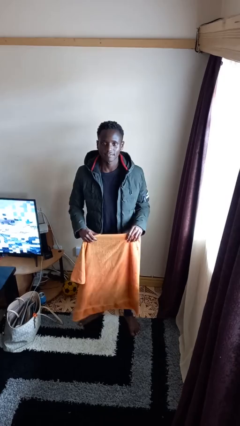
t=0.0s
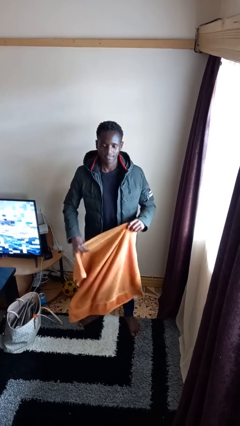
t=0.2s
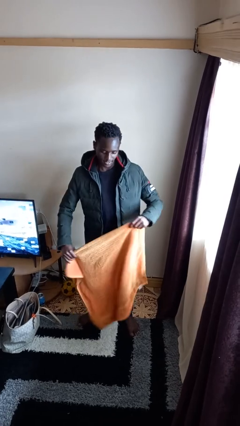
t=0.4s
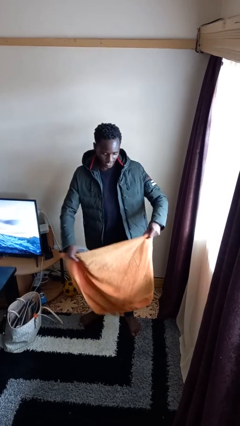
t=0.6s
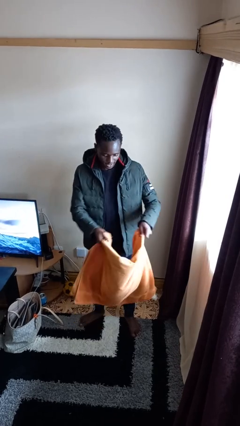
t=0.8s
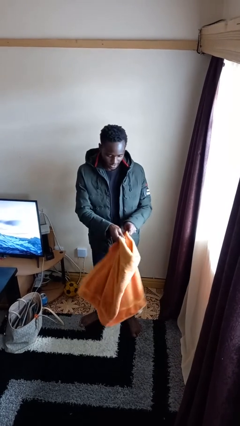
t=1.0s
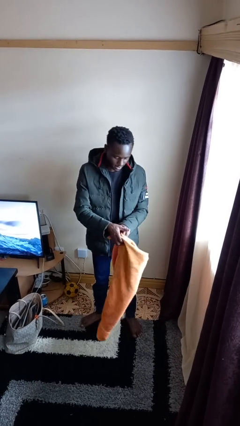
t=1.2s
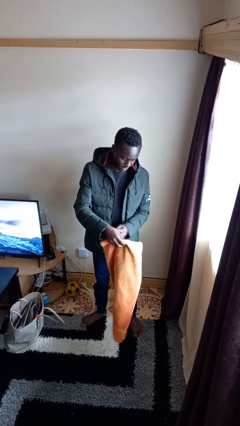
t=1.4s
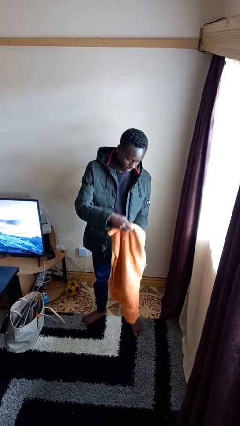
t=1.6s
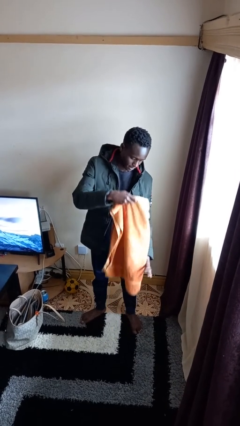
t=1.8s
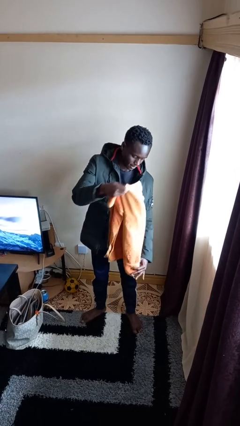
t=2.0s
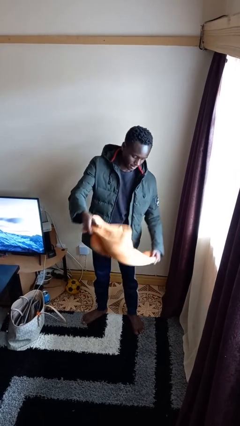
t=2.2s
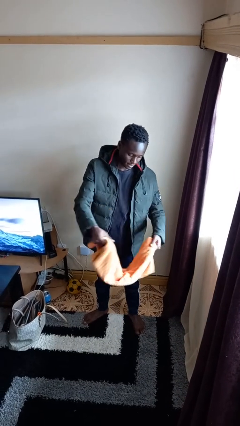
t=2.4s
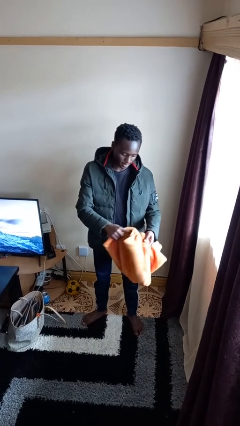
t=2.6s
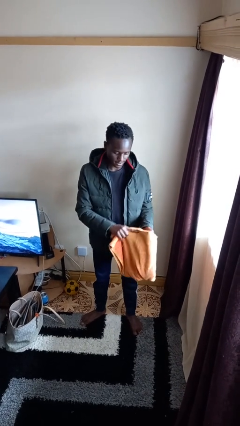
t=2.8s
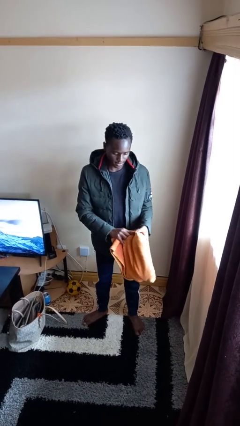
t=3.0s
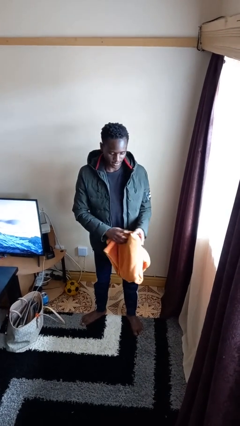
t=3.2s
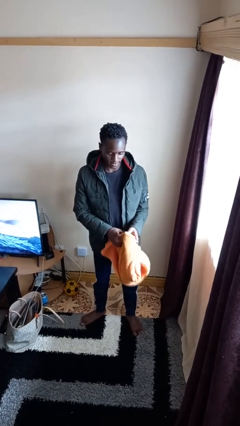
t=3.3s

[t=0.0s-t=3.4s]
person folds towel

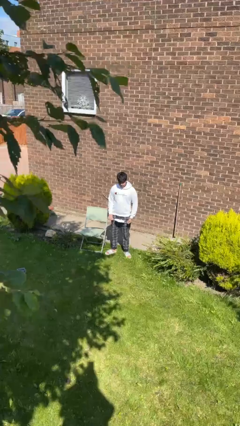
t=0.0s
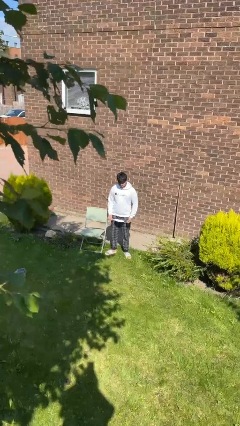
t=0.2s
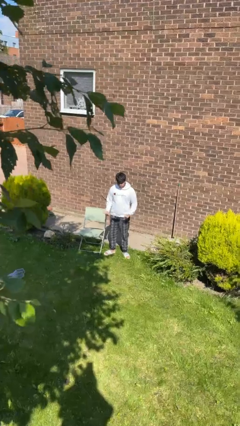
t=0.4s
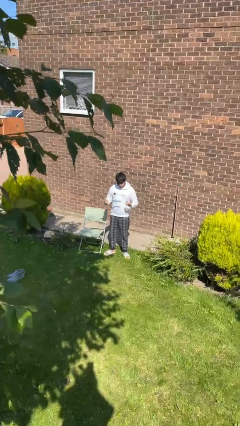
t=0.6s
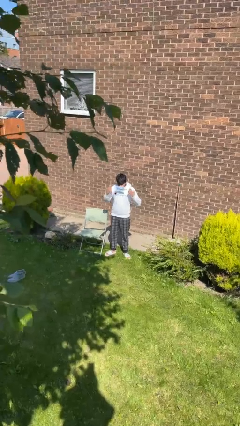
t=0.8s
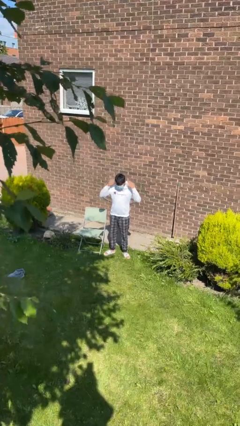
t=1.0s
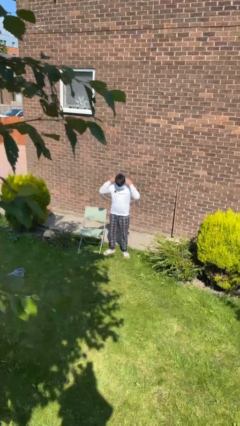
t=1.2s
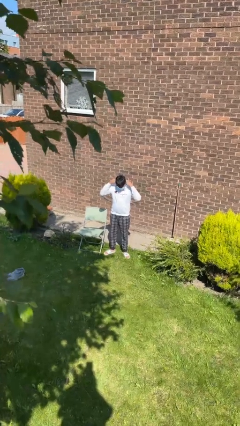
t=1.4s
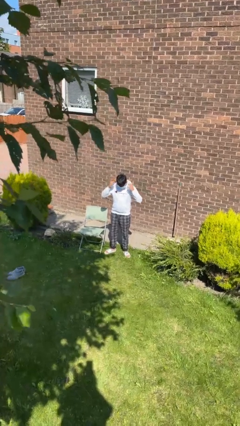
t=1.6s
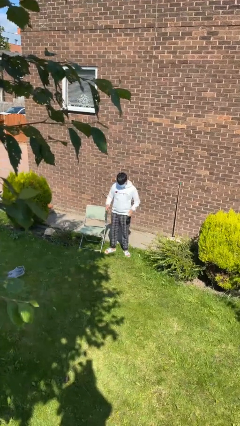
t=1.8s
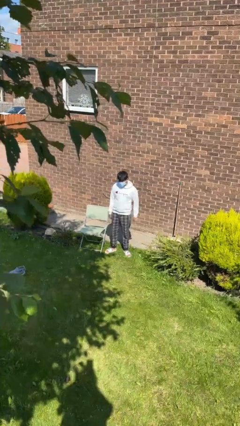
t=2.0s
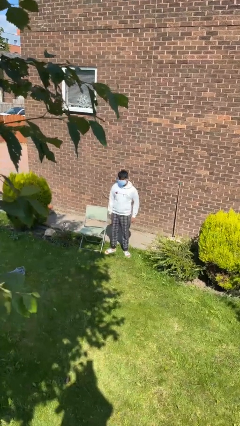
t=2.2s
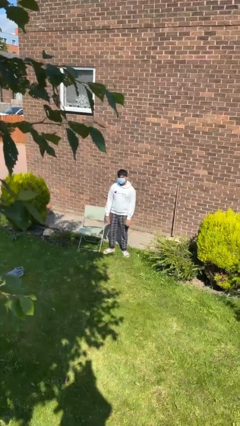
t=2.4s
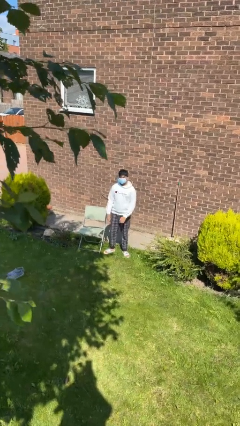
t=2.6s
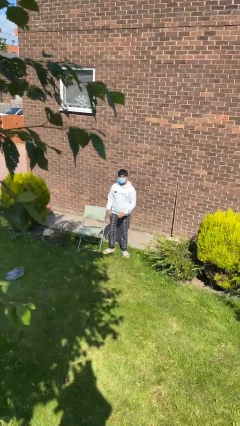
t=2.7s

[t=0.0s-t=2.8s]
person puts on facemask

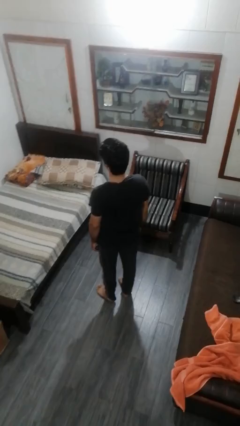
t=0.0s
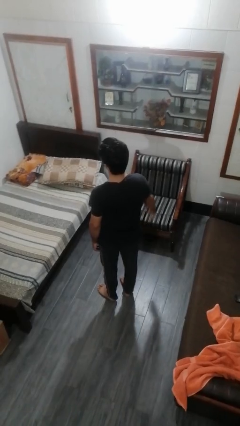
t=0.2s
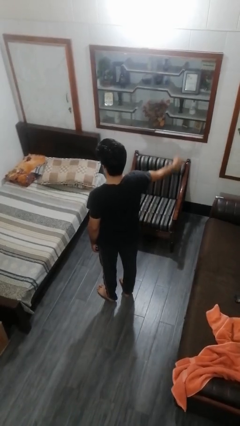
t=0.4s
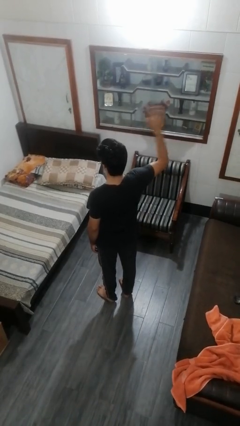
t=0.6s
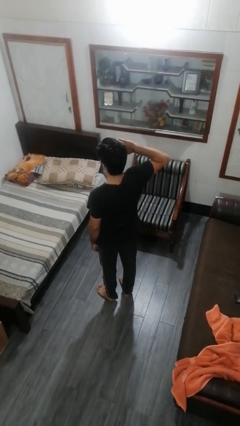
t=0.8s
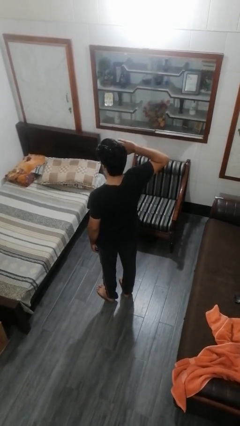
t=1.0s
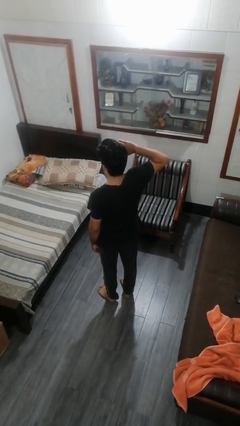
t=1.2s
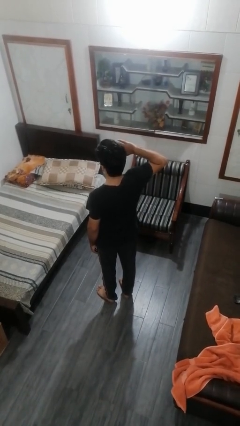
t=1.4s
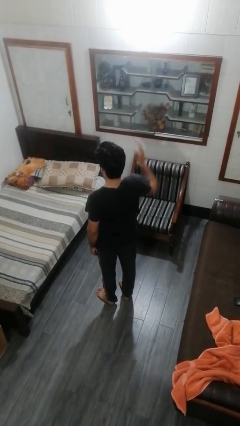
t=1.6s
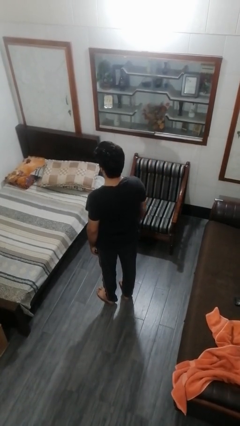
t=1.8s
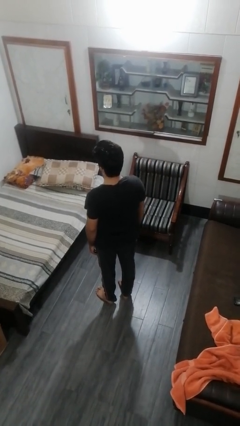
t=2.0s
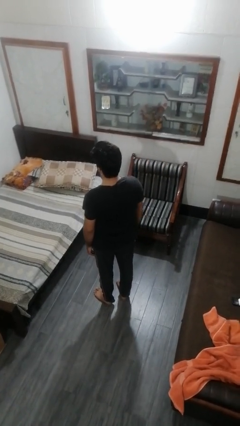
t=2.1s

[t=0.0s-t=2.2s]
person salutes

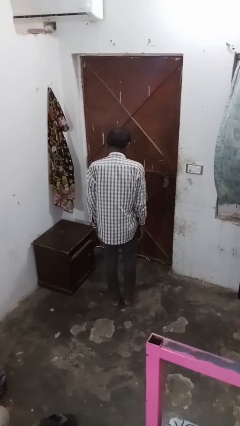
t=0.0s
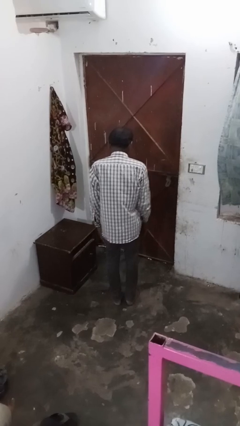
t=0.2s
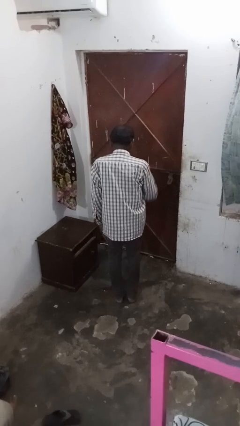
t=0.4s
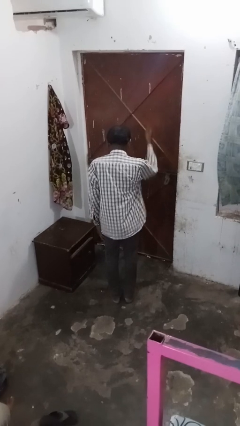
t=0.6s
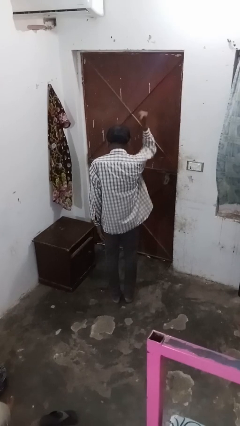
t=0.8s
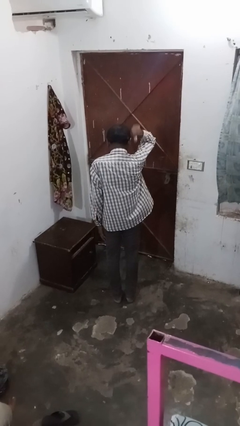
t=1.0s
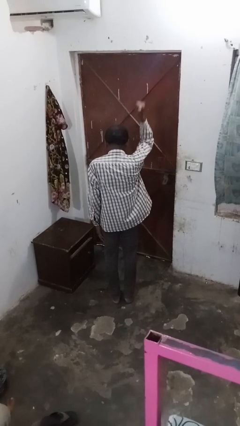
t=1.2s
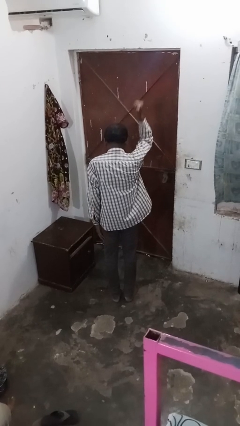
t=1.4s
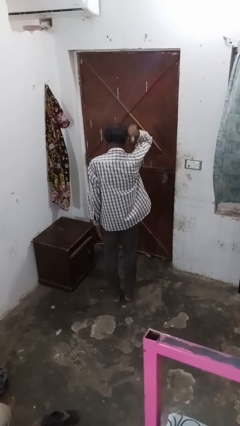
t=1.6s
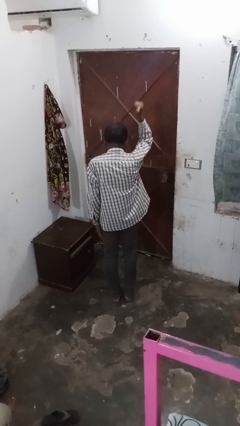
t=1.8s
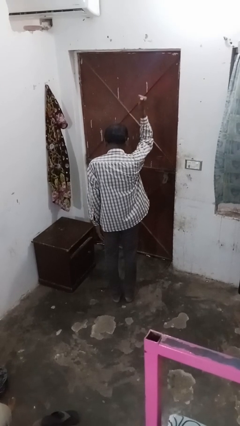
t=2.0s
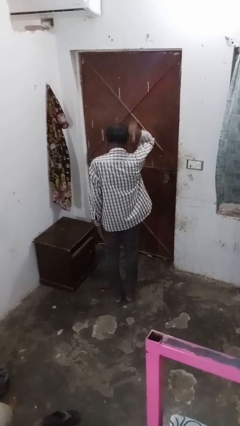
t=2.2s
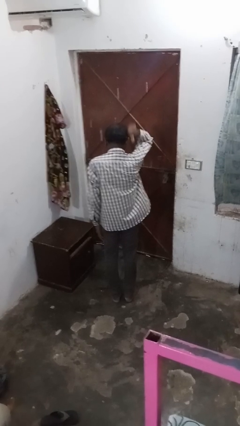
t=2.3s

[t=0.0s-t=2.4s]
person gestures behind me

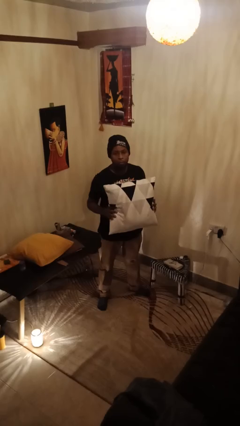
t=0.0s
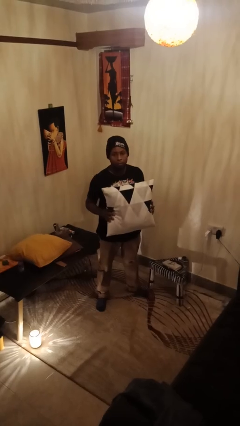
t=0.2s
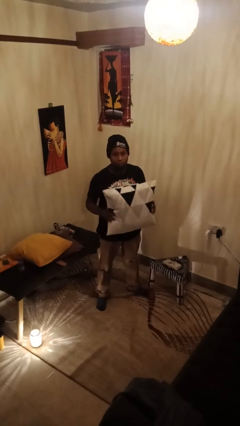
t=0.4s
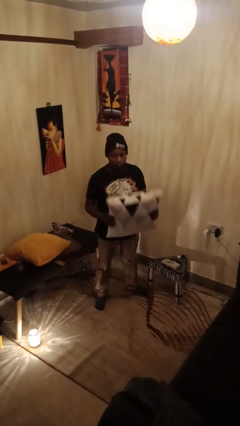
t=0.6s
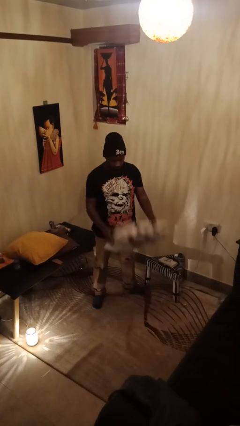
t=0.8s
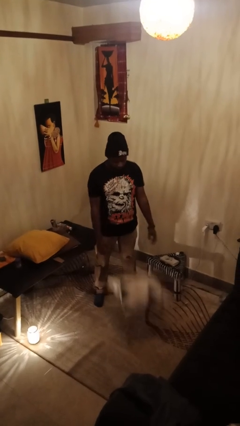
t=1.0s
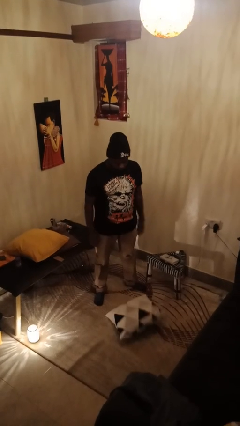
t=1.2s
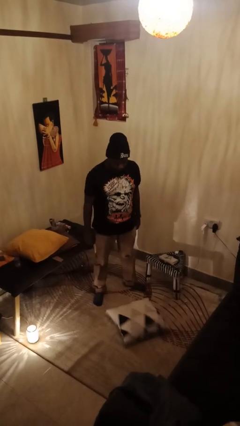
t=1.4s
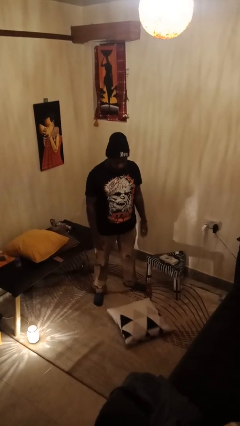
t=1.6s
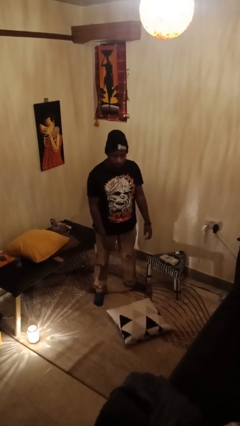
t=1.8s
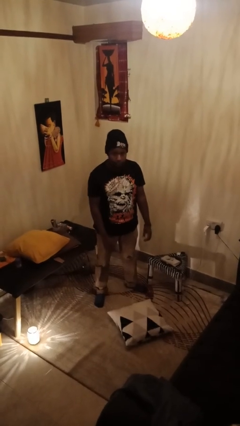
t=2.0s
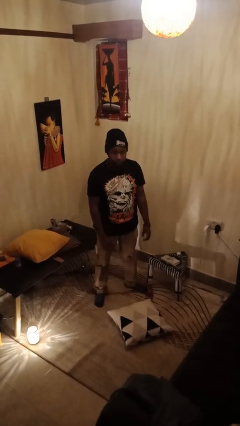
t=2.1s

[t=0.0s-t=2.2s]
person drops object

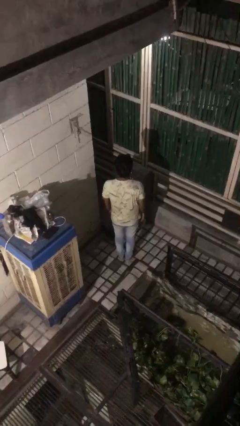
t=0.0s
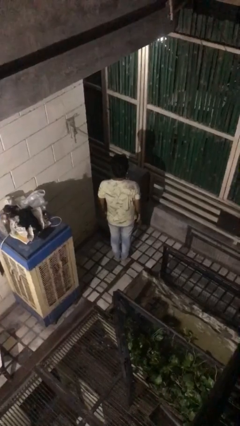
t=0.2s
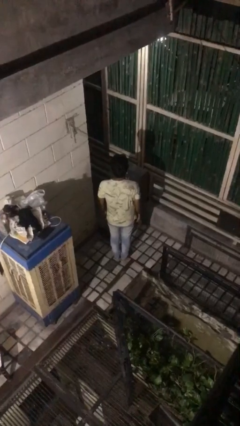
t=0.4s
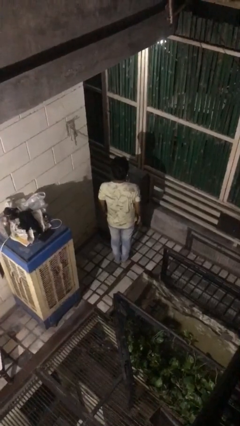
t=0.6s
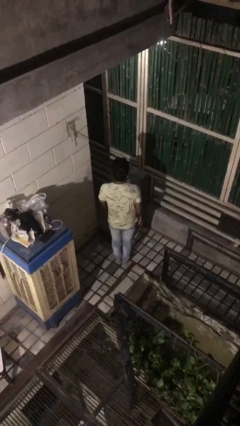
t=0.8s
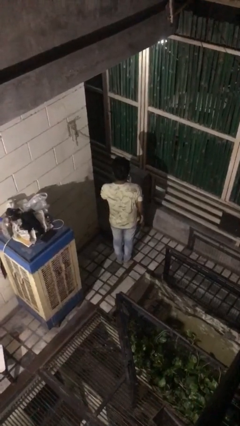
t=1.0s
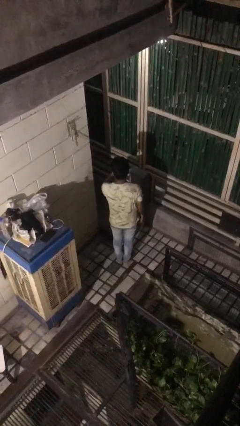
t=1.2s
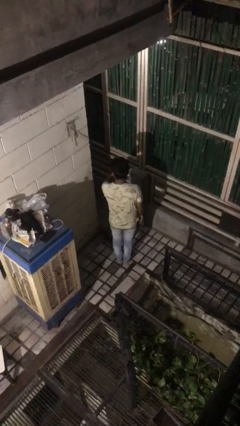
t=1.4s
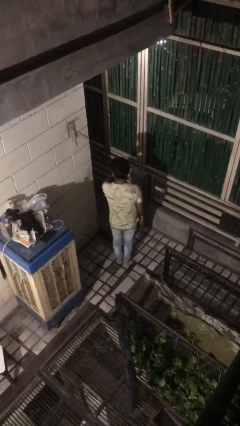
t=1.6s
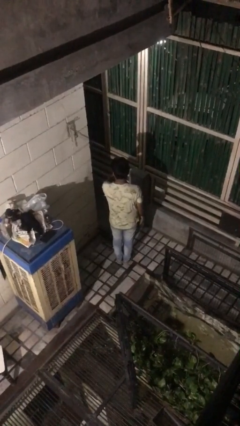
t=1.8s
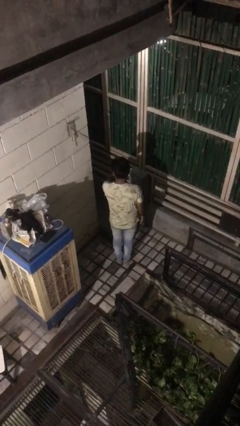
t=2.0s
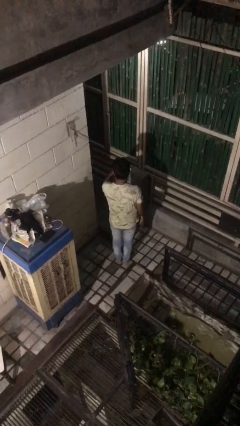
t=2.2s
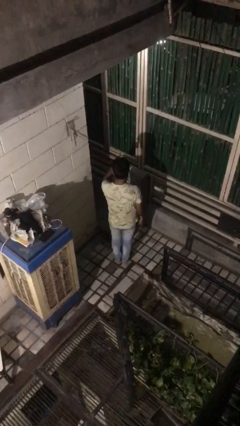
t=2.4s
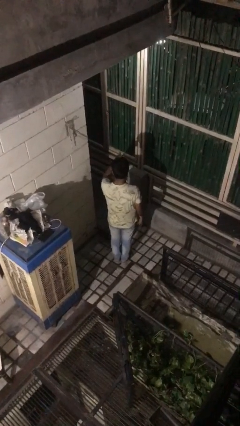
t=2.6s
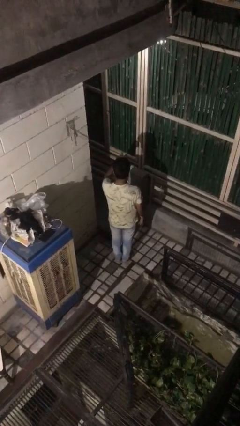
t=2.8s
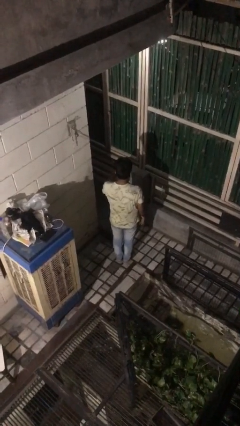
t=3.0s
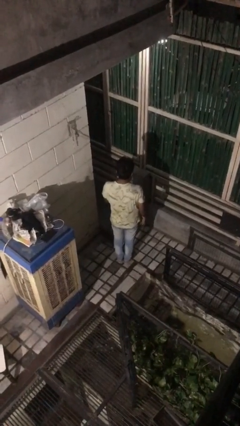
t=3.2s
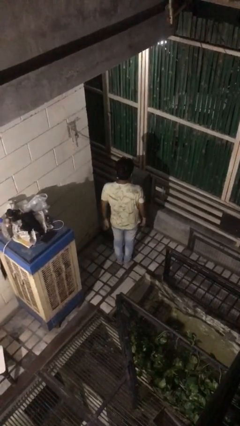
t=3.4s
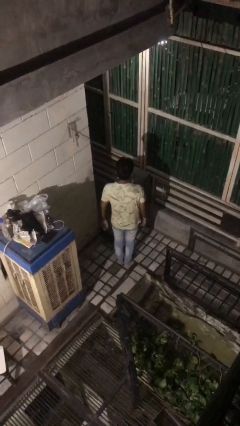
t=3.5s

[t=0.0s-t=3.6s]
person gestures watch closely

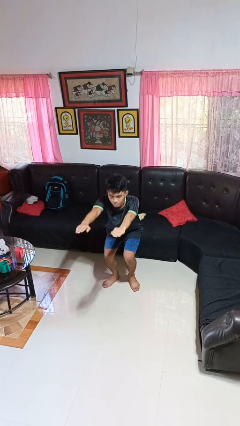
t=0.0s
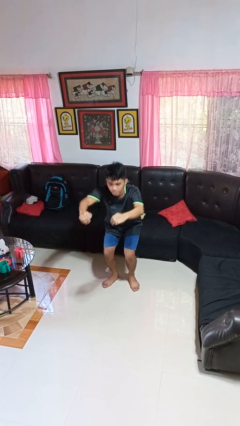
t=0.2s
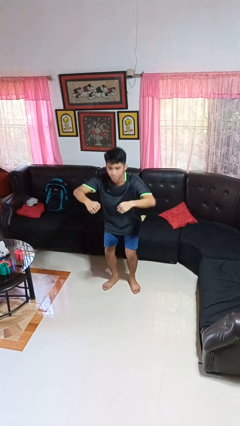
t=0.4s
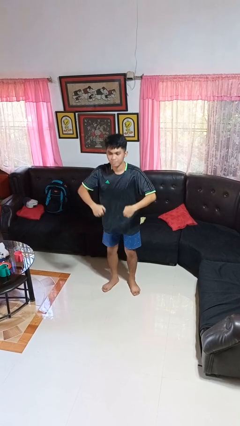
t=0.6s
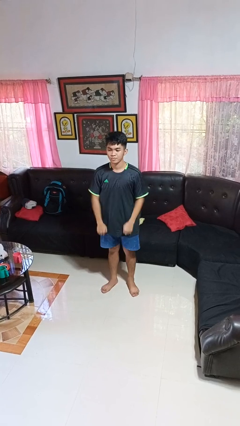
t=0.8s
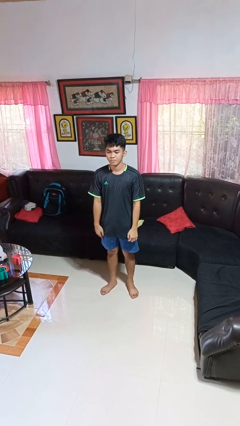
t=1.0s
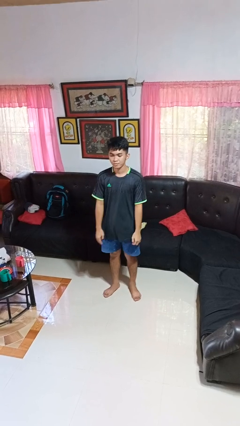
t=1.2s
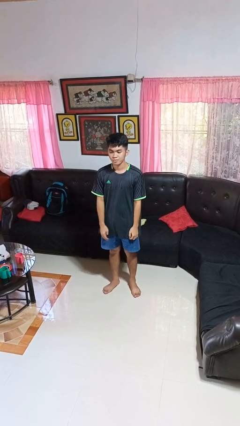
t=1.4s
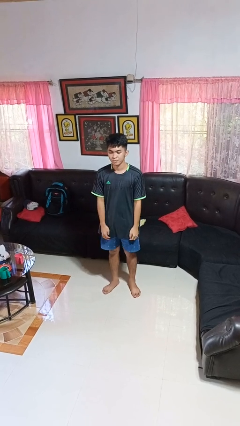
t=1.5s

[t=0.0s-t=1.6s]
person stands up
